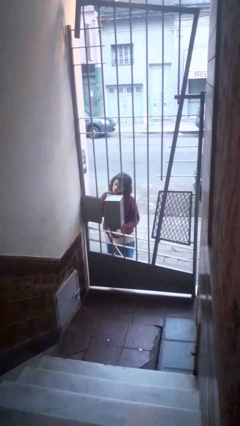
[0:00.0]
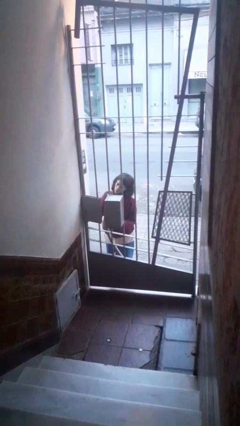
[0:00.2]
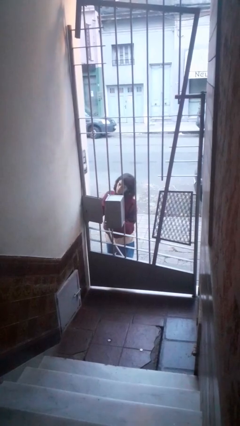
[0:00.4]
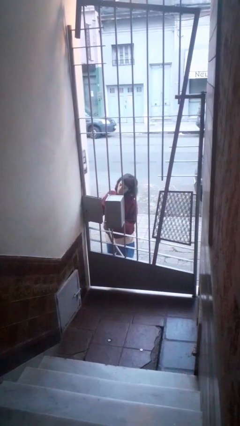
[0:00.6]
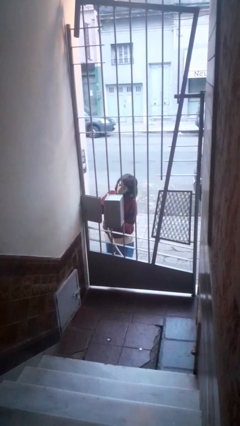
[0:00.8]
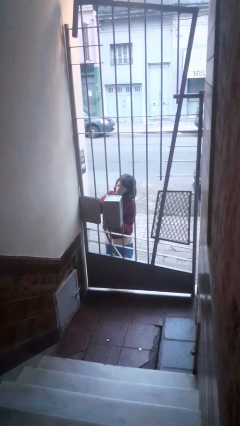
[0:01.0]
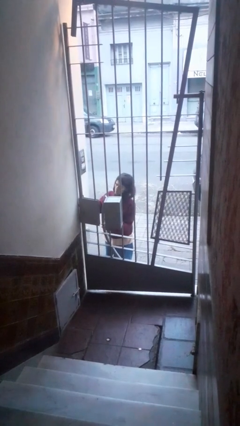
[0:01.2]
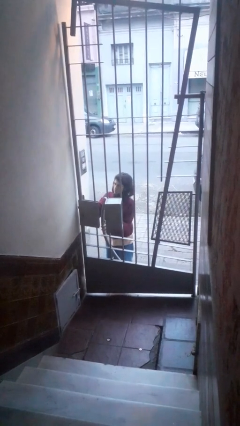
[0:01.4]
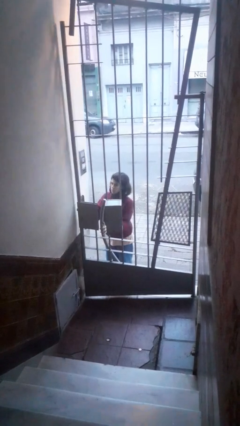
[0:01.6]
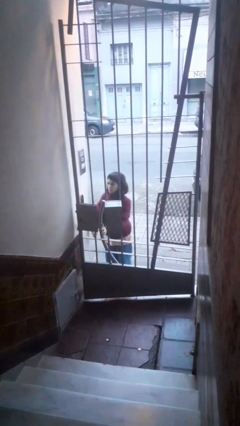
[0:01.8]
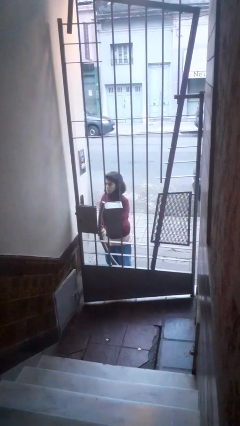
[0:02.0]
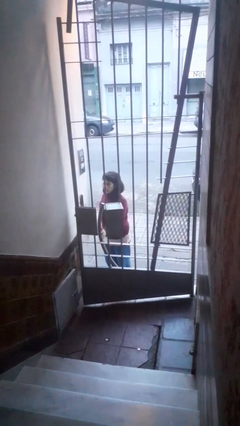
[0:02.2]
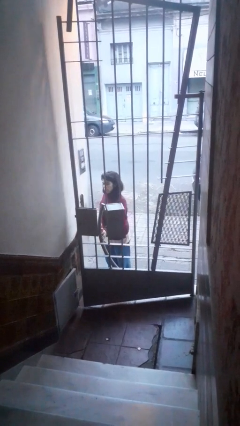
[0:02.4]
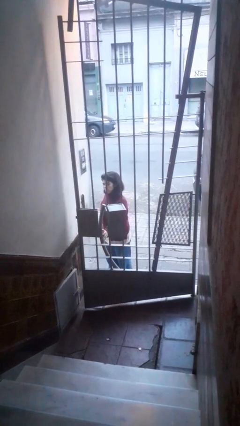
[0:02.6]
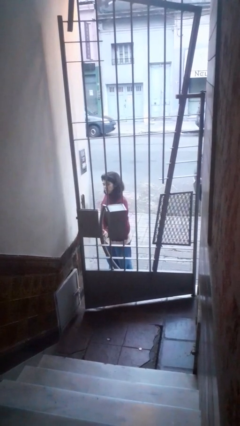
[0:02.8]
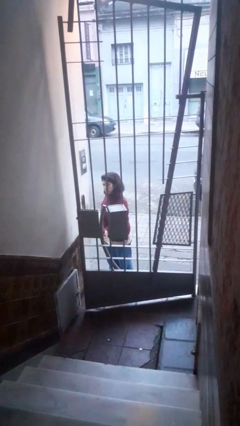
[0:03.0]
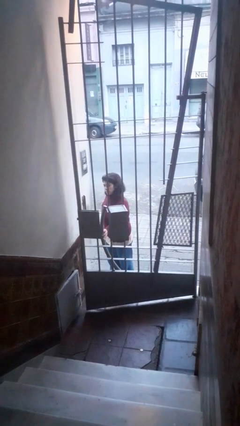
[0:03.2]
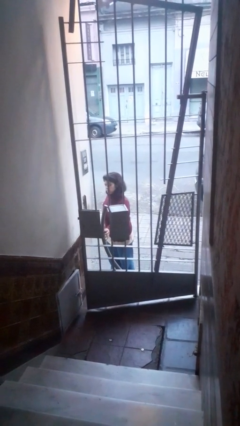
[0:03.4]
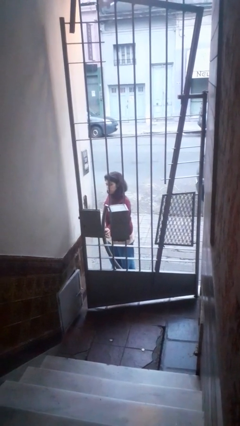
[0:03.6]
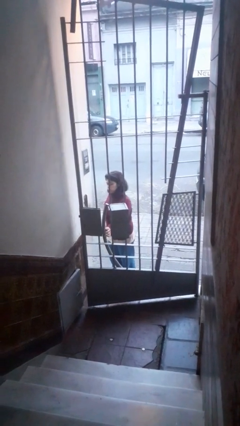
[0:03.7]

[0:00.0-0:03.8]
person opens gate

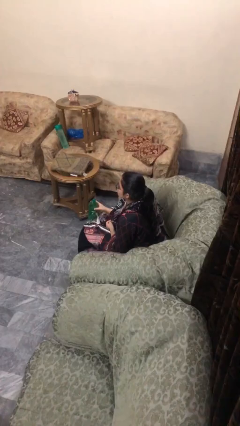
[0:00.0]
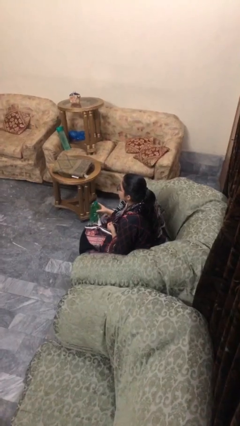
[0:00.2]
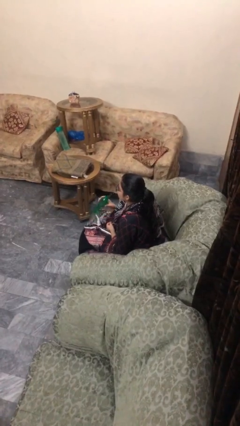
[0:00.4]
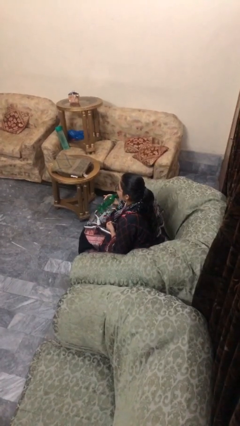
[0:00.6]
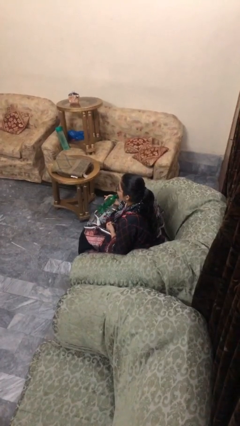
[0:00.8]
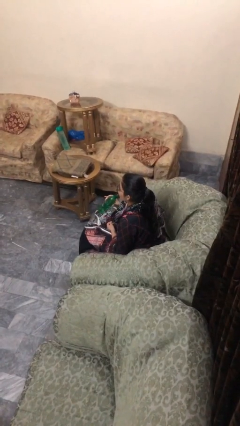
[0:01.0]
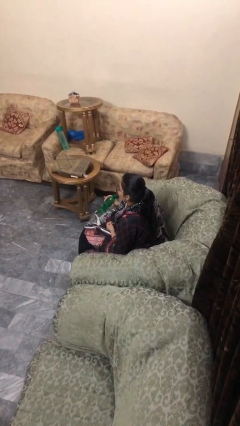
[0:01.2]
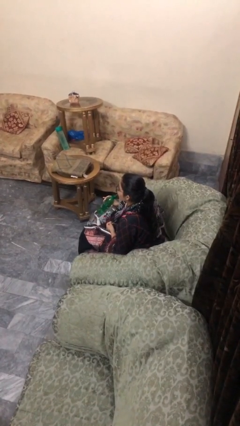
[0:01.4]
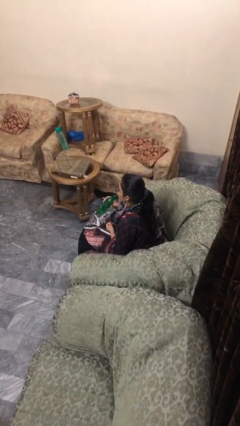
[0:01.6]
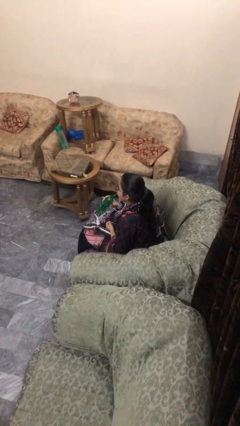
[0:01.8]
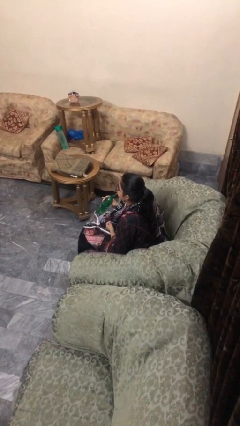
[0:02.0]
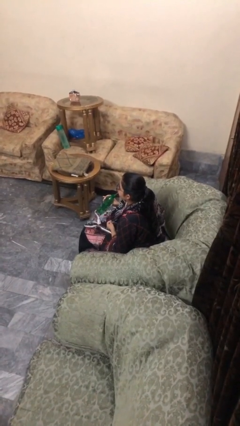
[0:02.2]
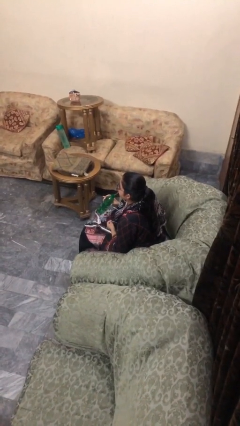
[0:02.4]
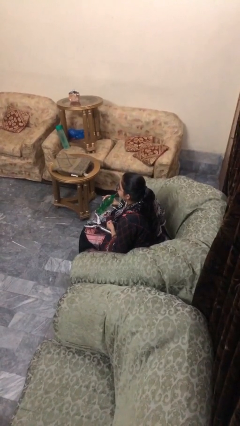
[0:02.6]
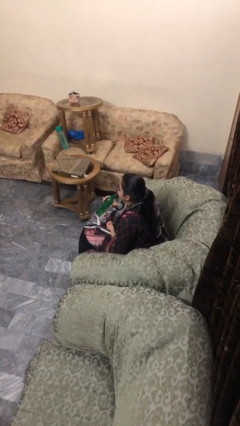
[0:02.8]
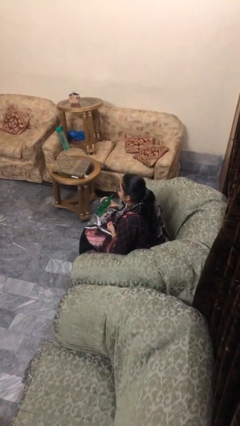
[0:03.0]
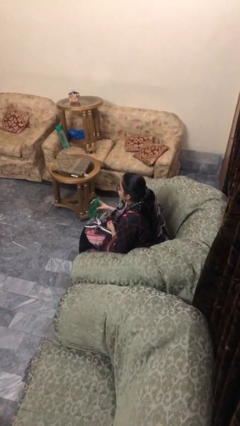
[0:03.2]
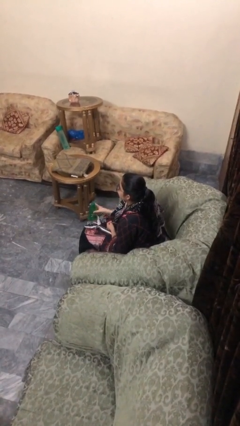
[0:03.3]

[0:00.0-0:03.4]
person drinks from straw

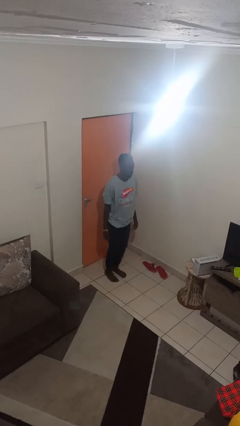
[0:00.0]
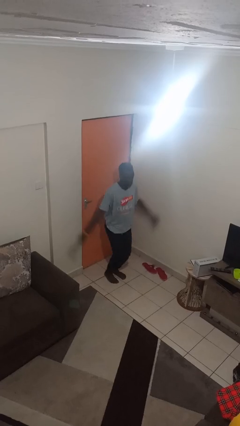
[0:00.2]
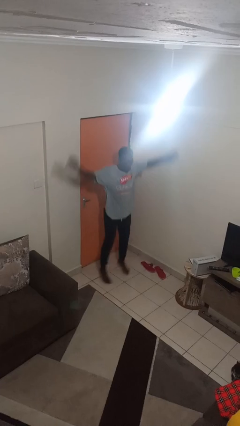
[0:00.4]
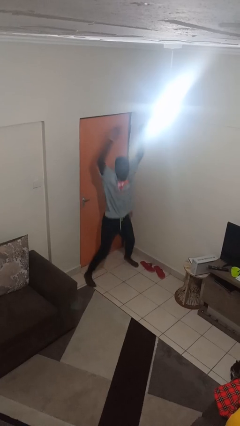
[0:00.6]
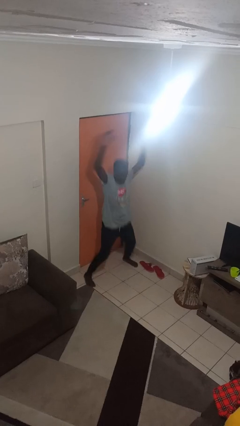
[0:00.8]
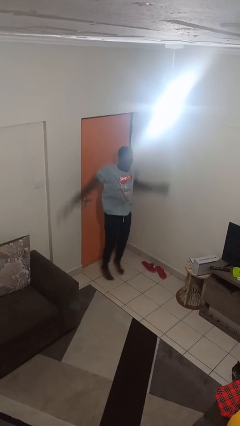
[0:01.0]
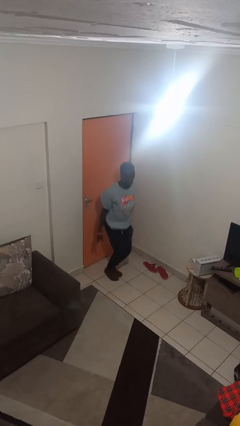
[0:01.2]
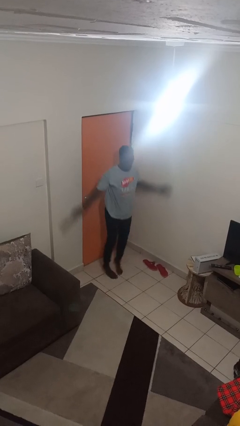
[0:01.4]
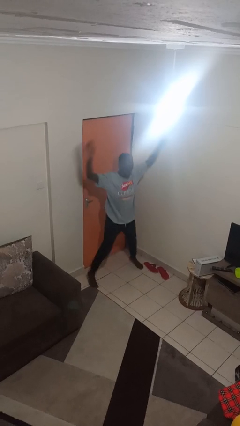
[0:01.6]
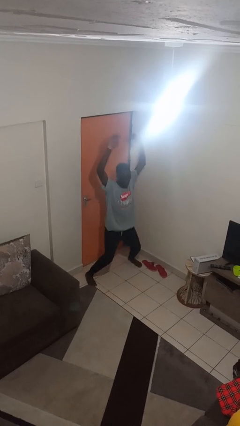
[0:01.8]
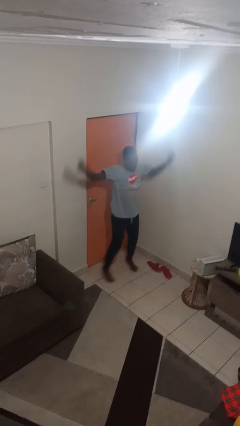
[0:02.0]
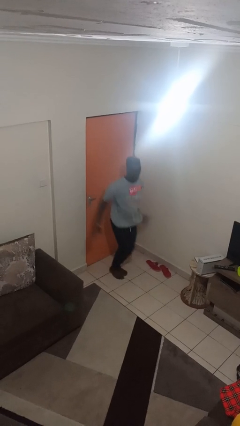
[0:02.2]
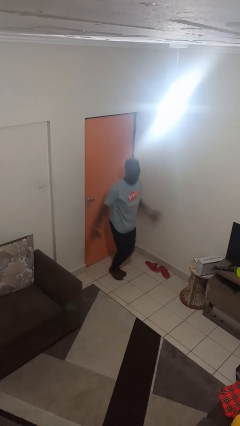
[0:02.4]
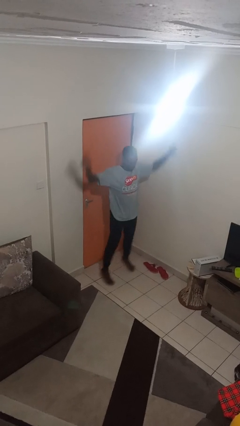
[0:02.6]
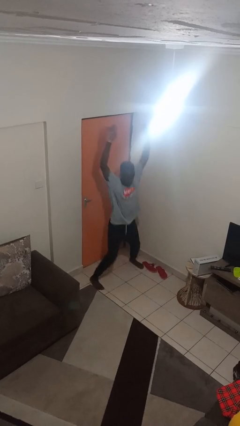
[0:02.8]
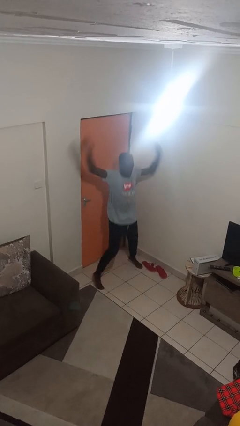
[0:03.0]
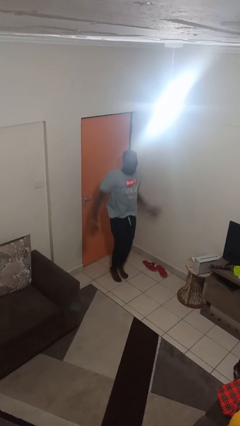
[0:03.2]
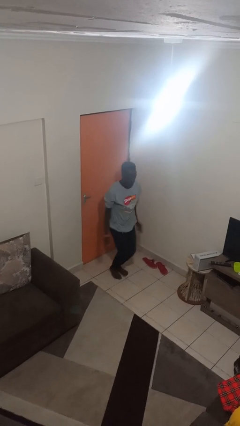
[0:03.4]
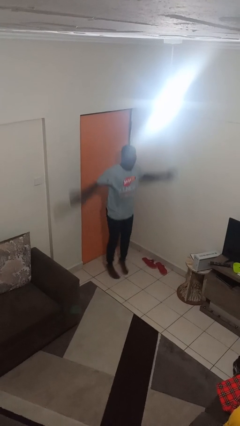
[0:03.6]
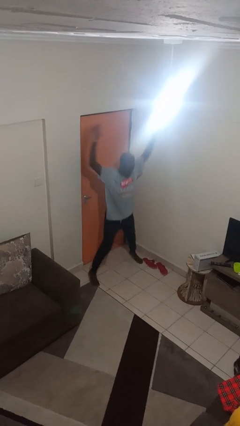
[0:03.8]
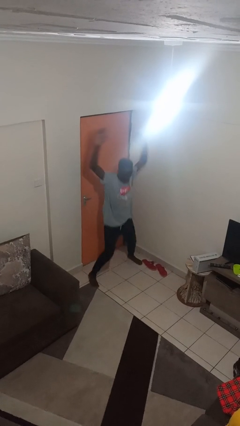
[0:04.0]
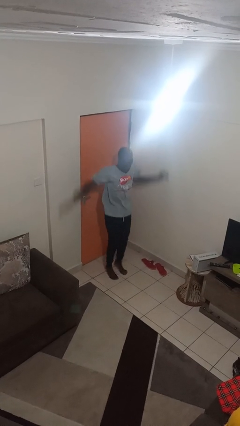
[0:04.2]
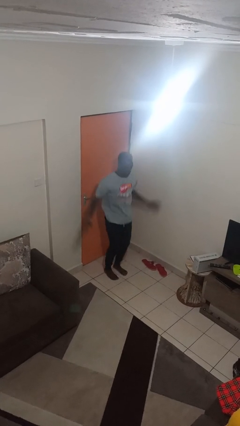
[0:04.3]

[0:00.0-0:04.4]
person exercises with jumping jacks

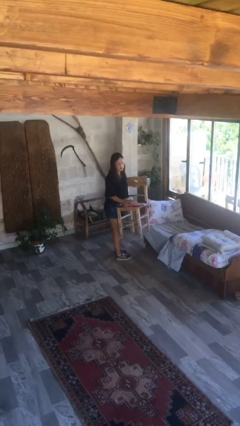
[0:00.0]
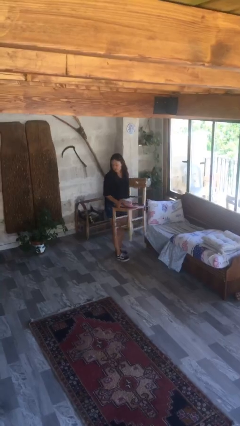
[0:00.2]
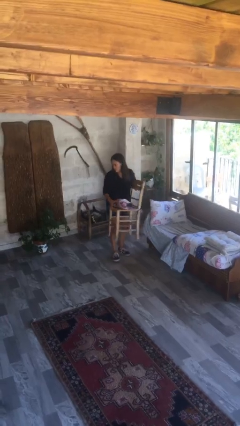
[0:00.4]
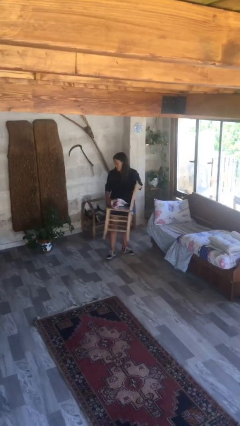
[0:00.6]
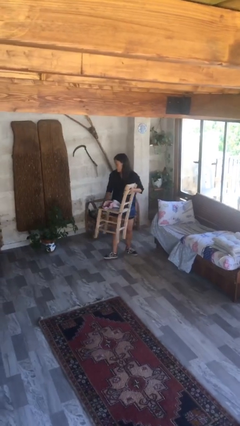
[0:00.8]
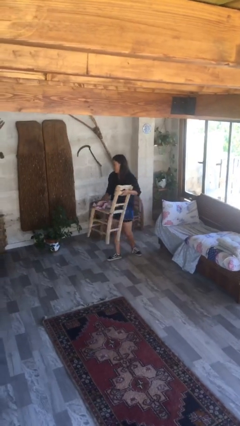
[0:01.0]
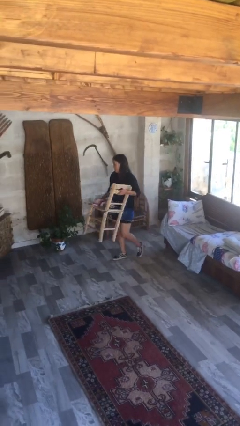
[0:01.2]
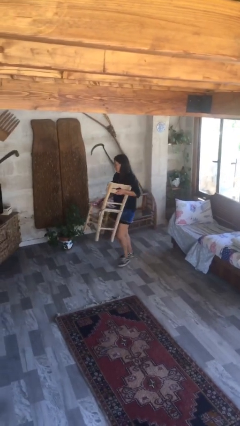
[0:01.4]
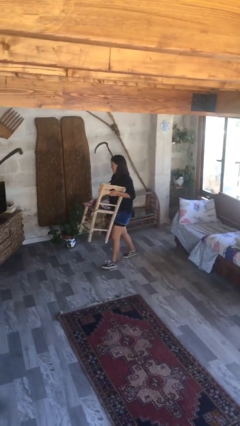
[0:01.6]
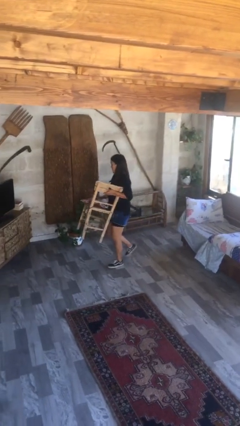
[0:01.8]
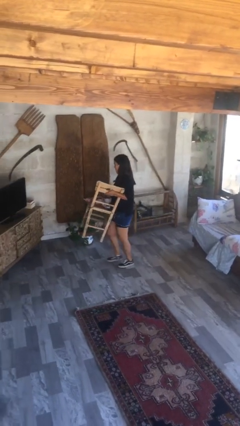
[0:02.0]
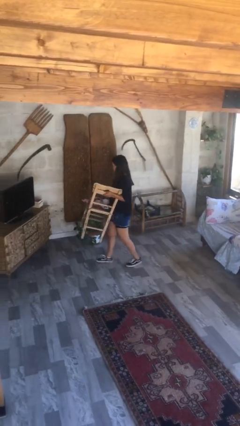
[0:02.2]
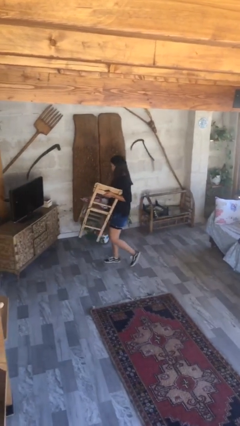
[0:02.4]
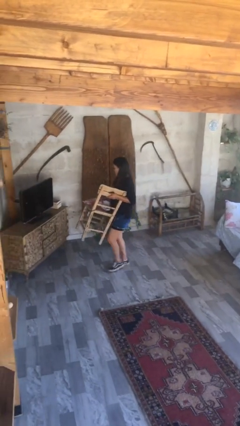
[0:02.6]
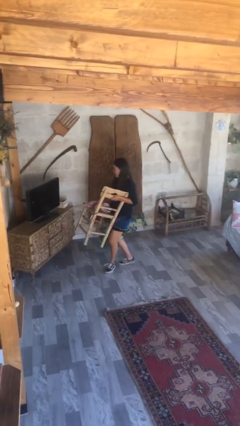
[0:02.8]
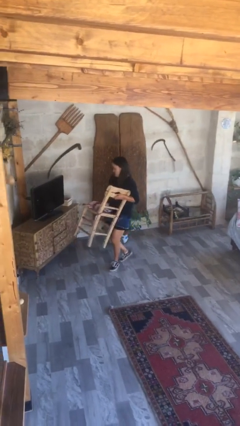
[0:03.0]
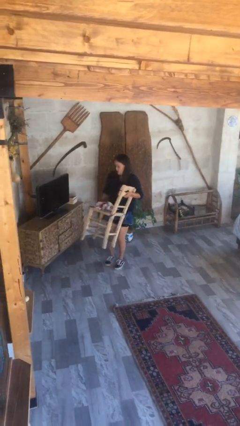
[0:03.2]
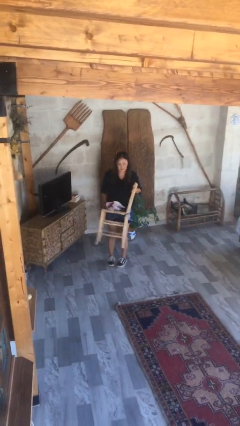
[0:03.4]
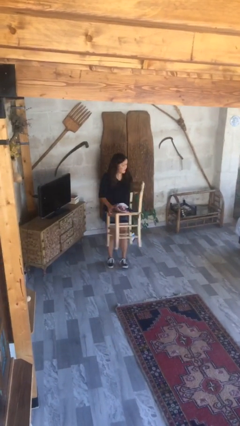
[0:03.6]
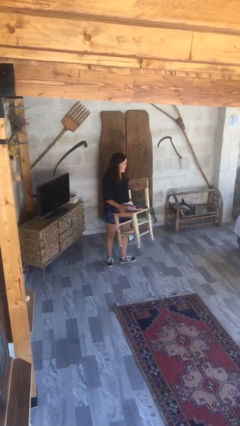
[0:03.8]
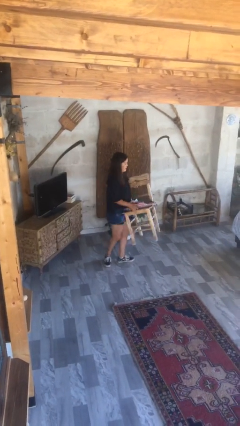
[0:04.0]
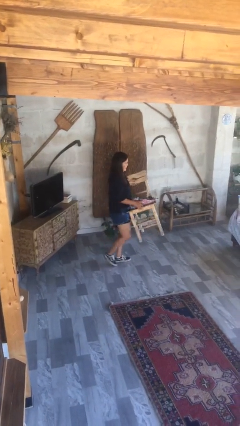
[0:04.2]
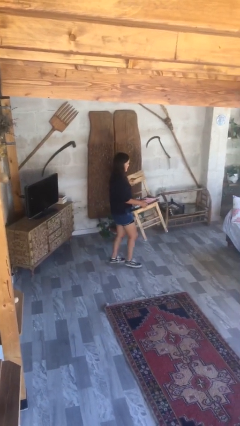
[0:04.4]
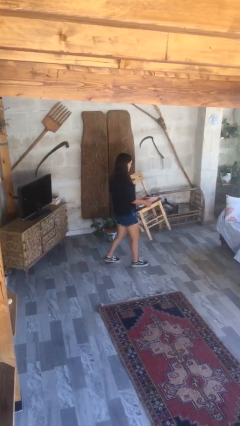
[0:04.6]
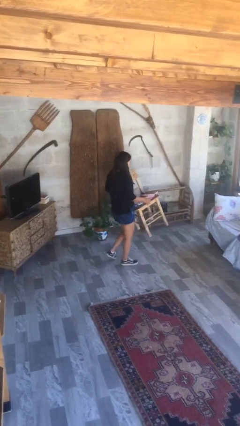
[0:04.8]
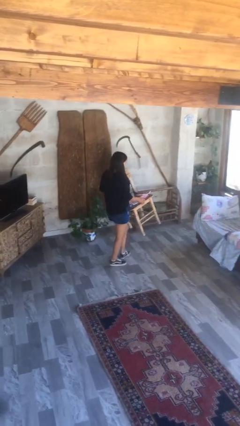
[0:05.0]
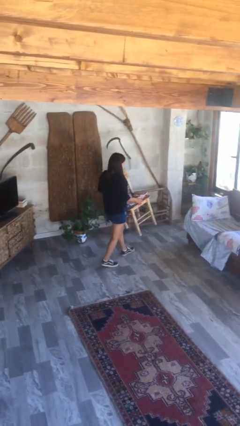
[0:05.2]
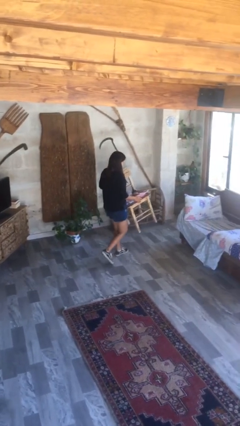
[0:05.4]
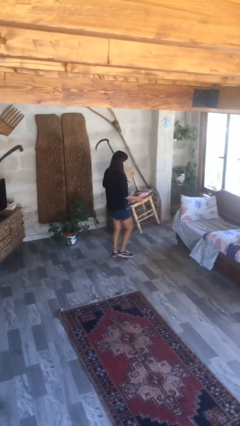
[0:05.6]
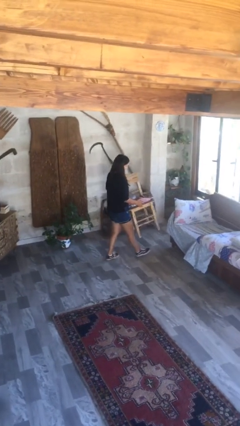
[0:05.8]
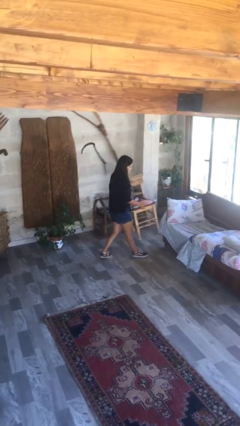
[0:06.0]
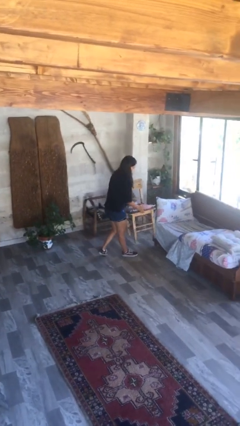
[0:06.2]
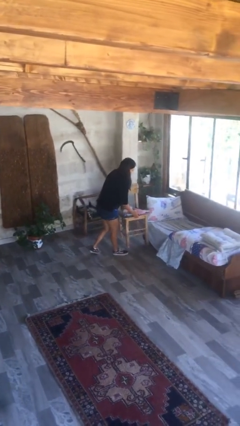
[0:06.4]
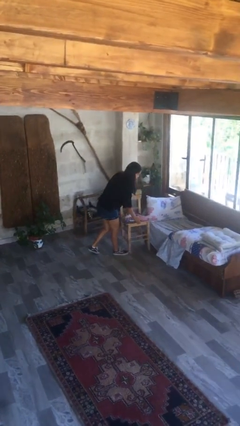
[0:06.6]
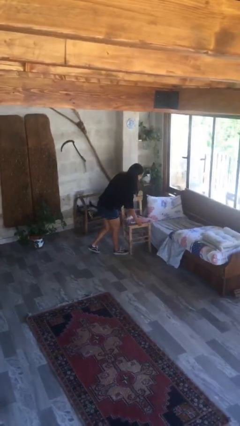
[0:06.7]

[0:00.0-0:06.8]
person carries heavy object
